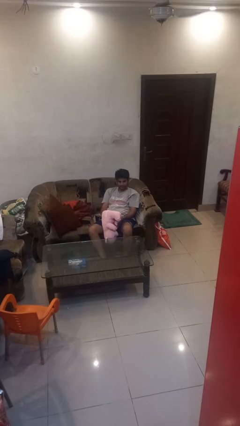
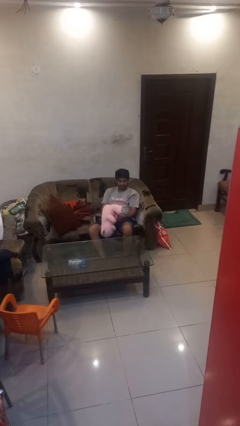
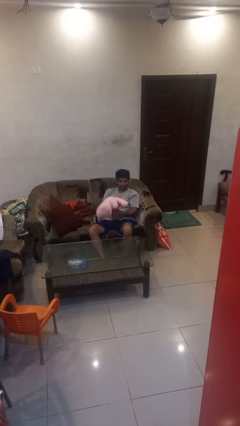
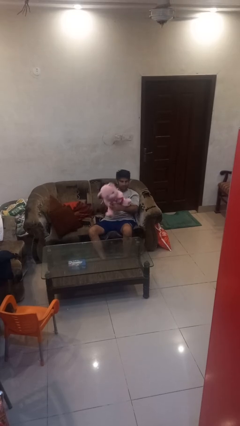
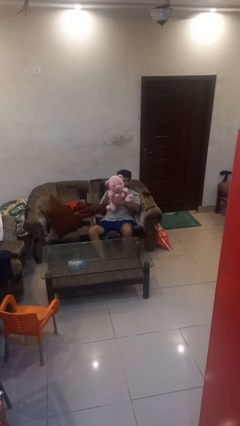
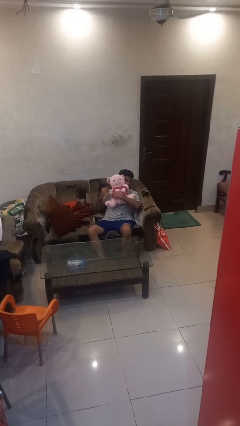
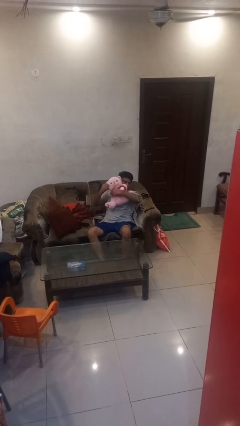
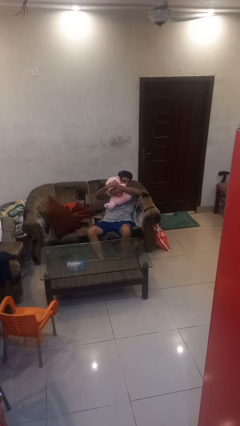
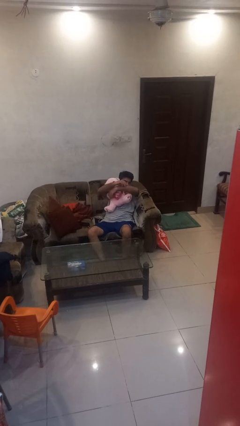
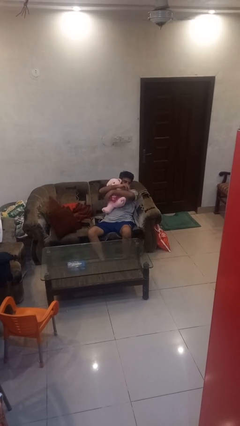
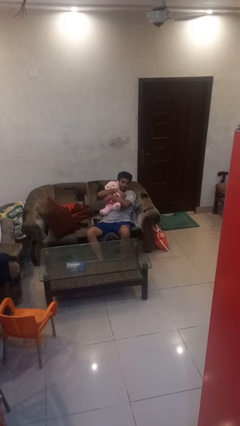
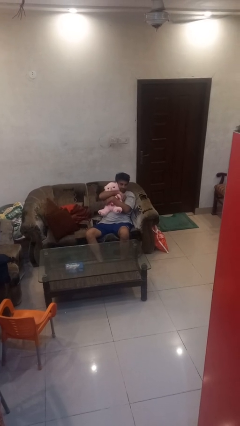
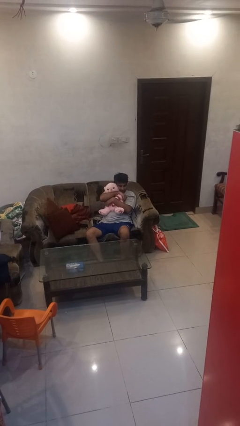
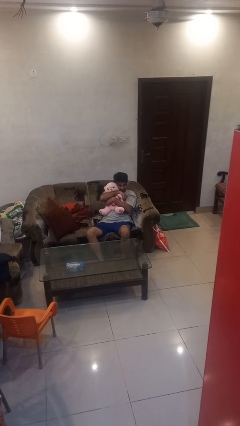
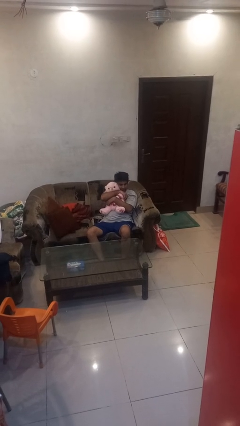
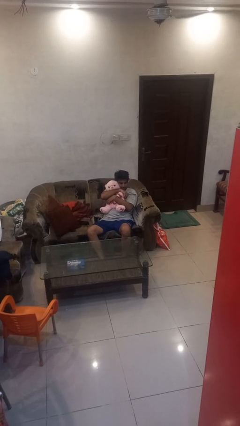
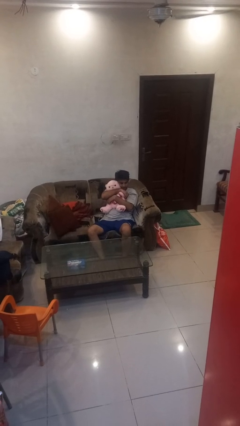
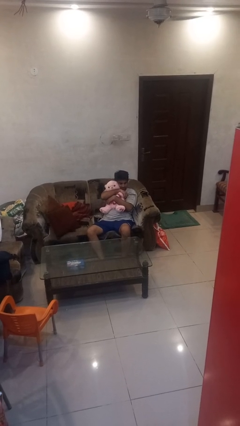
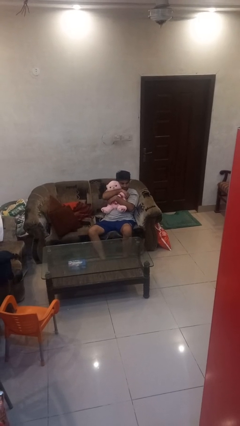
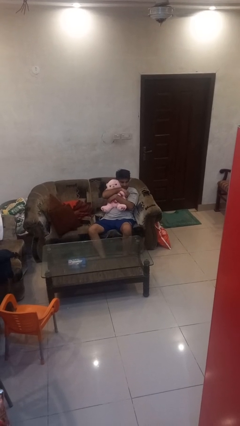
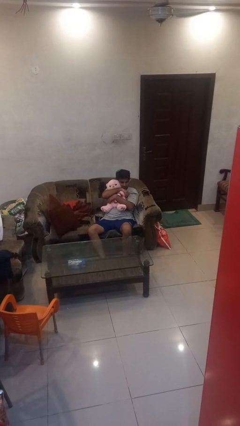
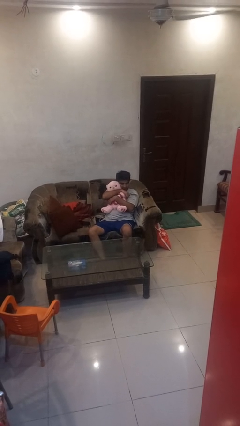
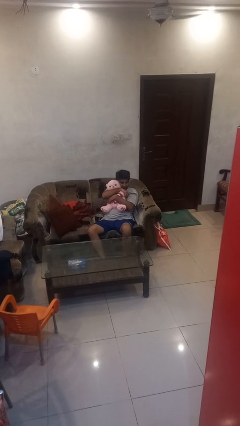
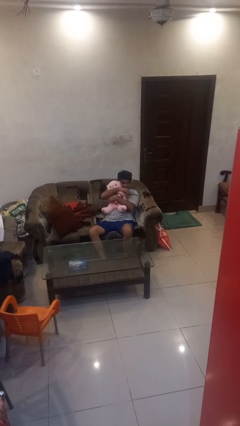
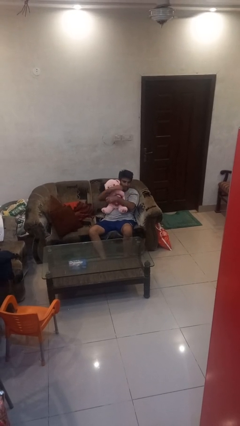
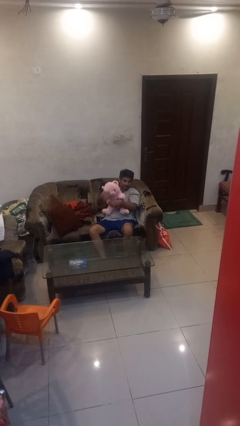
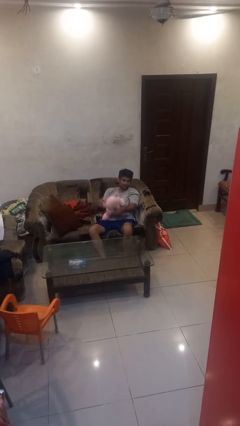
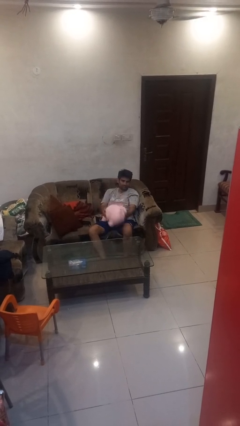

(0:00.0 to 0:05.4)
person hugs stuffed animal

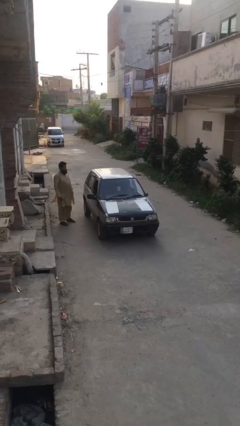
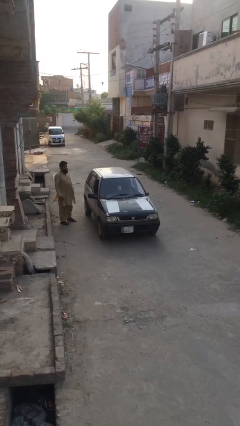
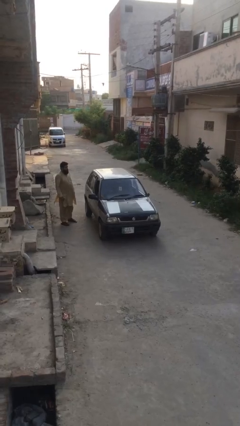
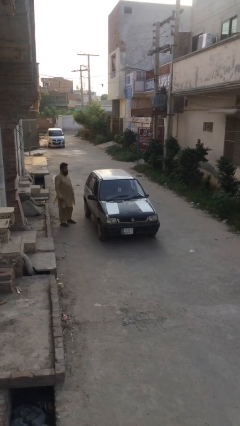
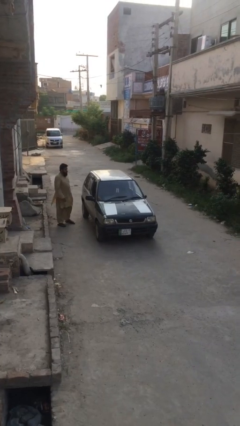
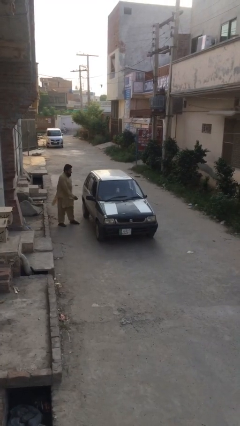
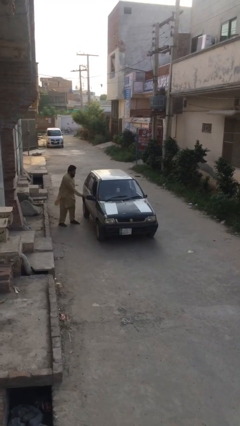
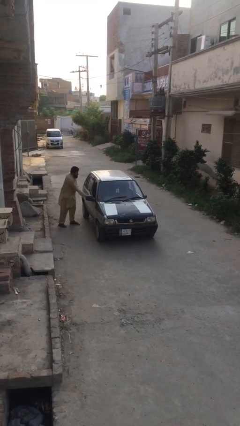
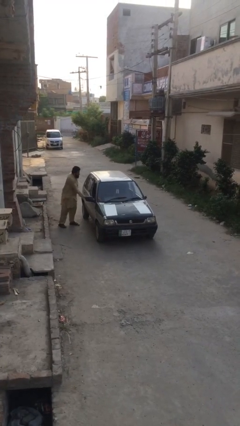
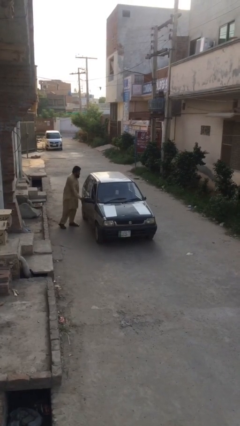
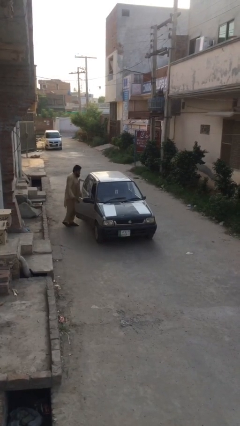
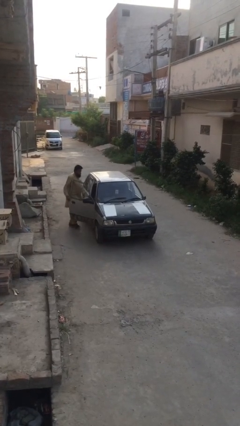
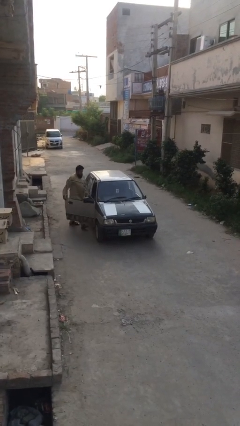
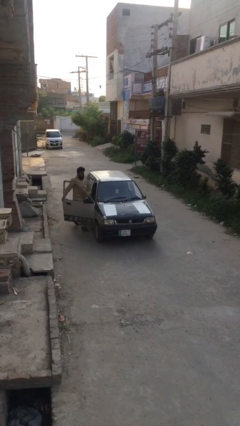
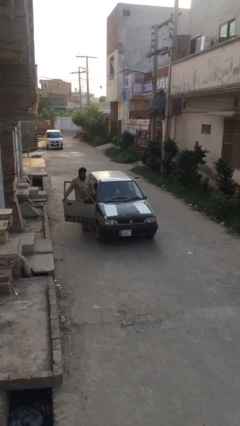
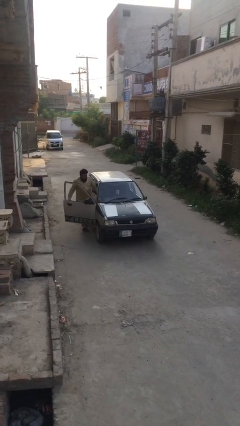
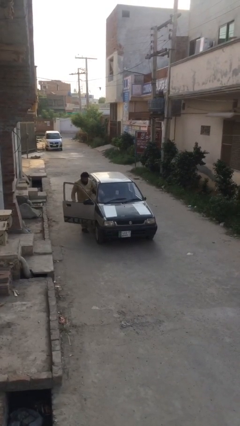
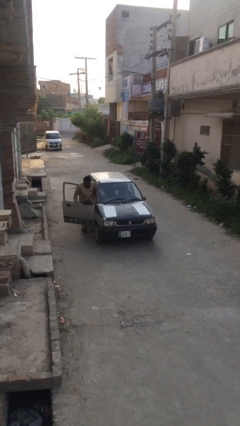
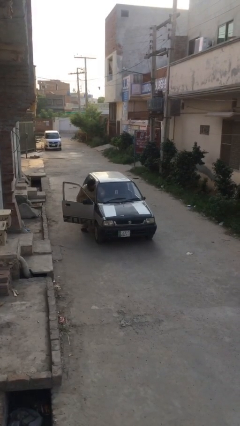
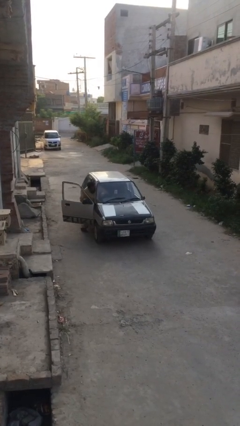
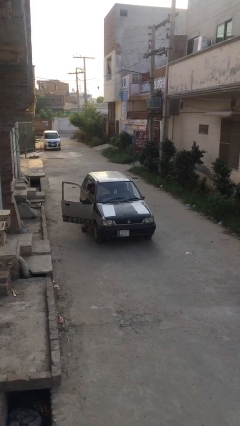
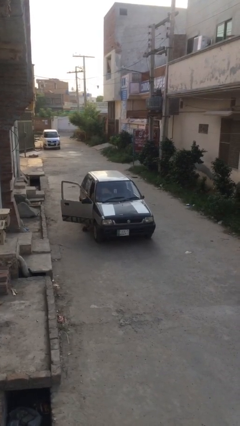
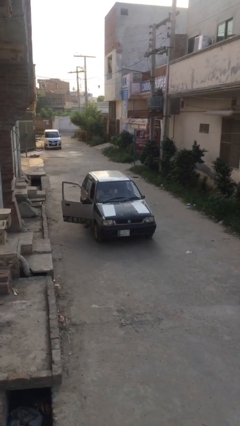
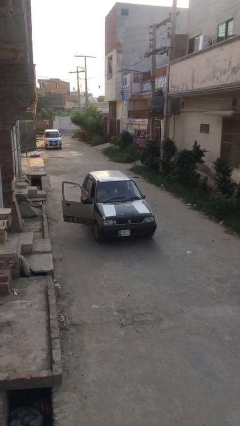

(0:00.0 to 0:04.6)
car picks up person

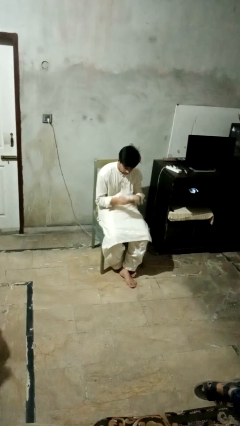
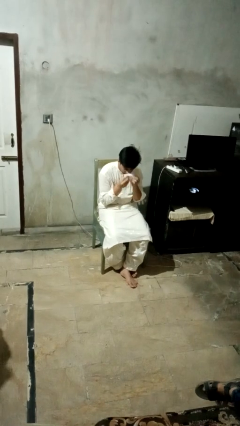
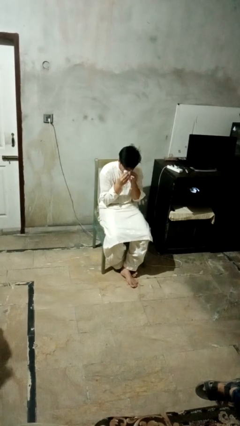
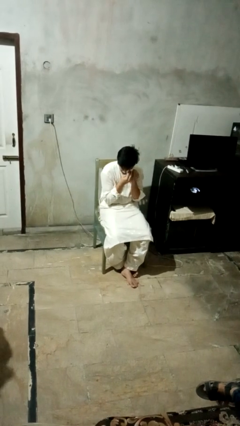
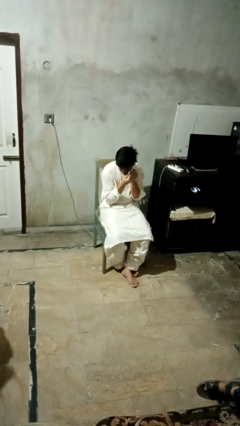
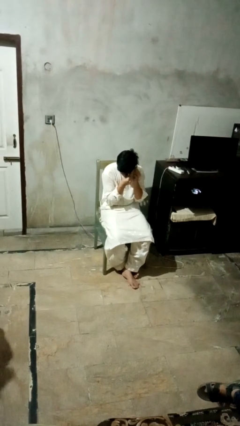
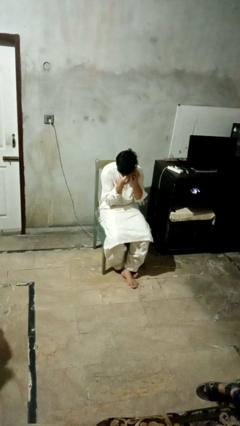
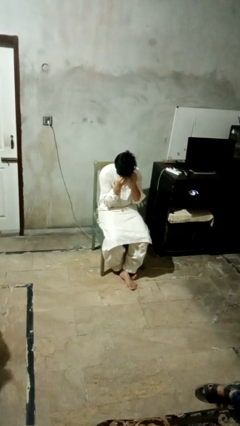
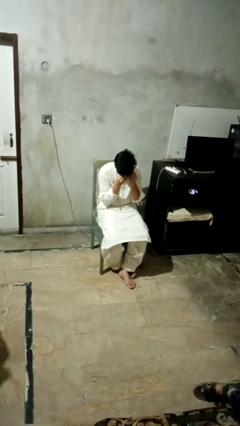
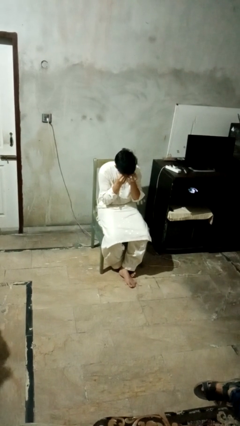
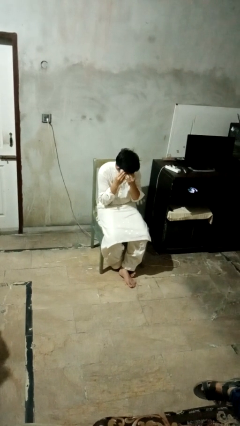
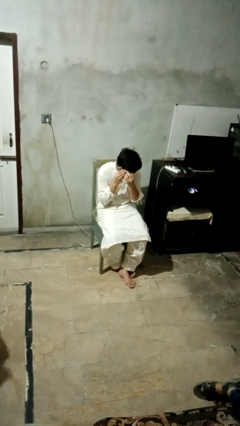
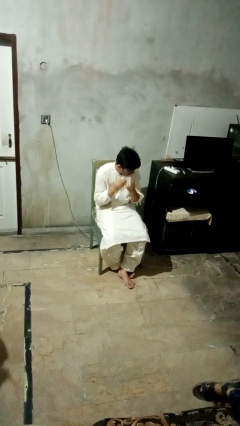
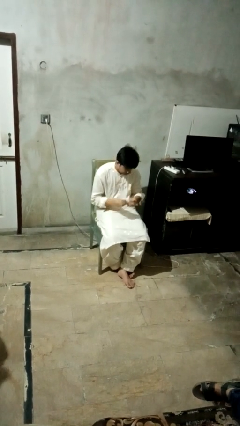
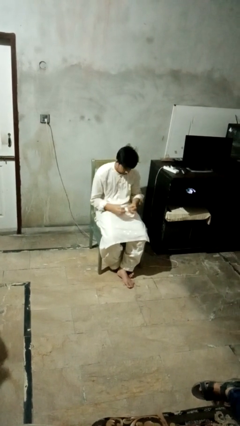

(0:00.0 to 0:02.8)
person wipes mouth with napkin

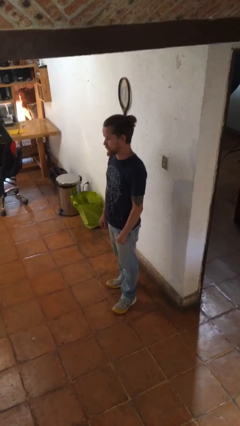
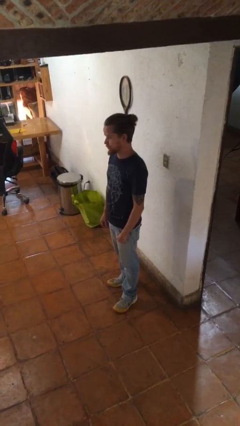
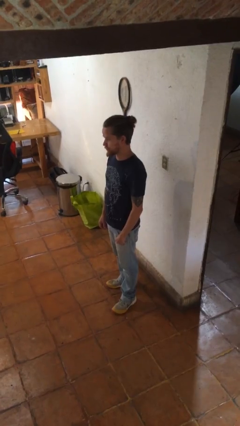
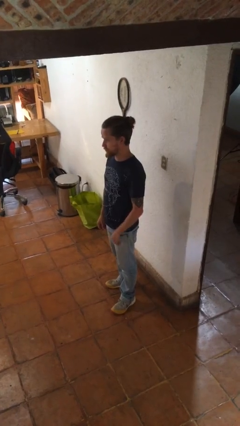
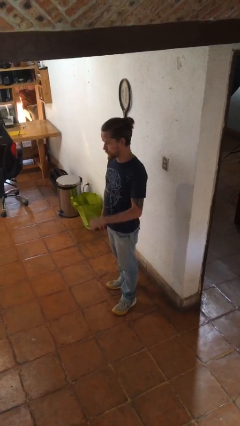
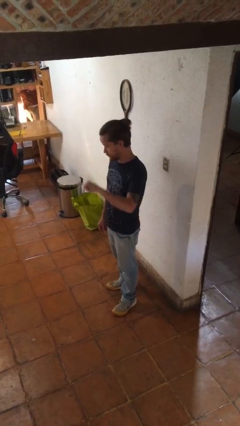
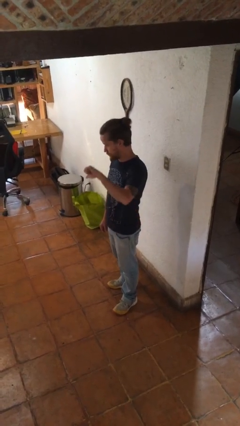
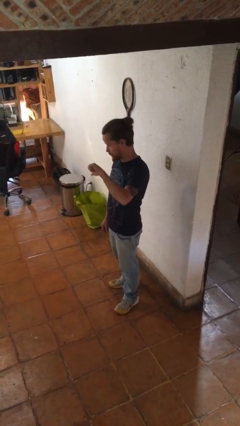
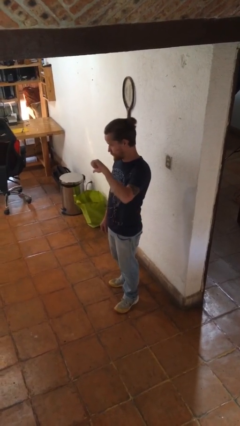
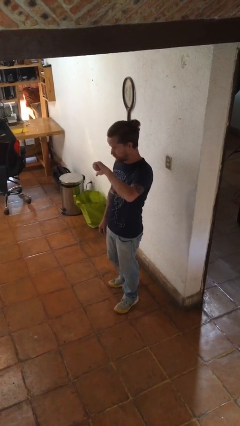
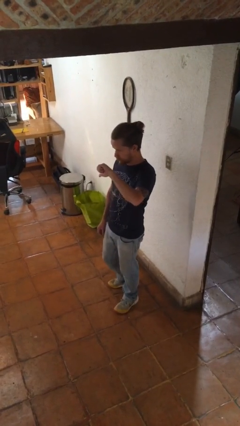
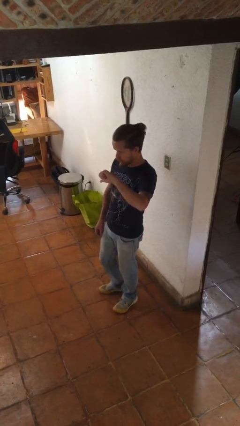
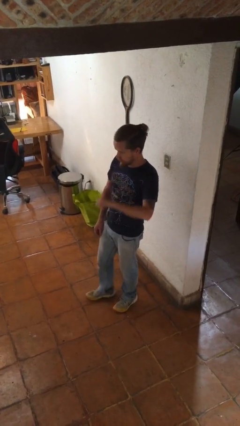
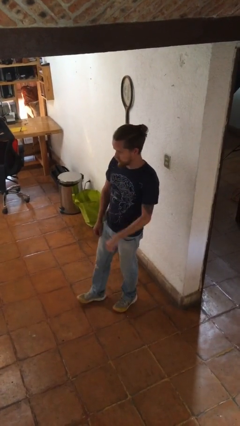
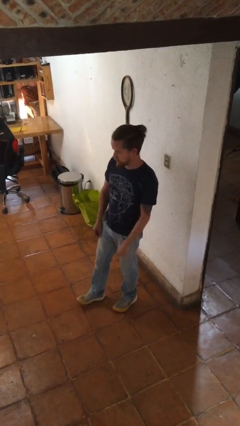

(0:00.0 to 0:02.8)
person gestures thumbs down

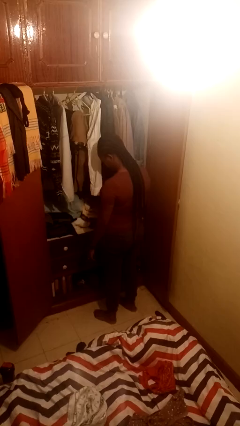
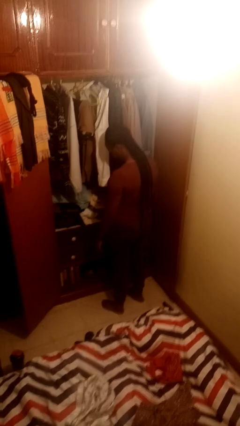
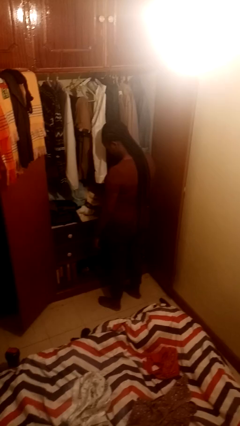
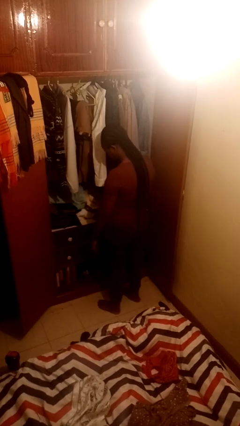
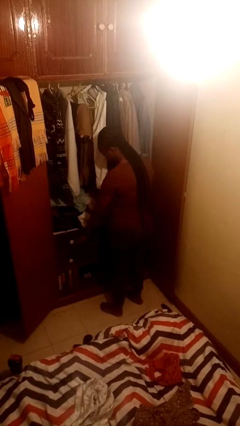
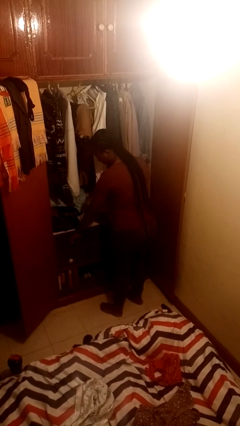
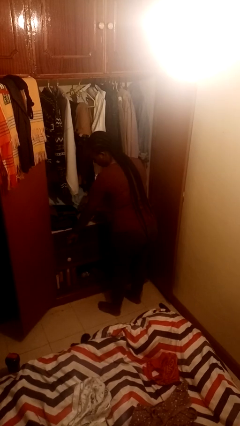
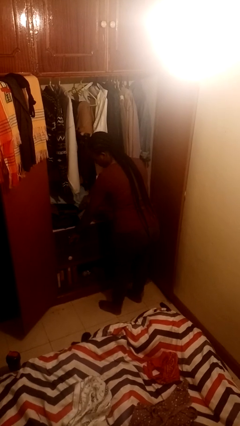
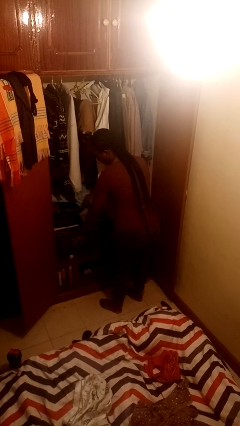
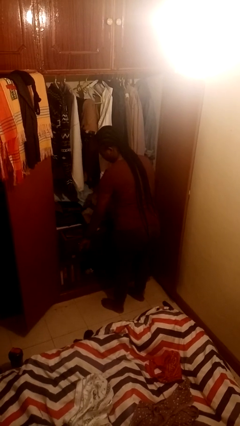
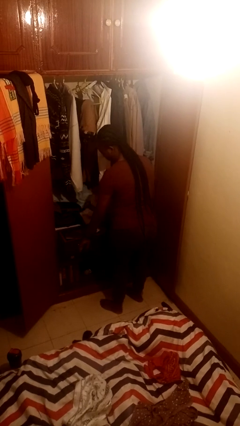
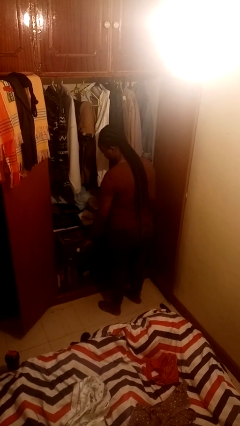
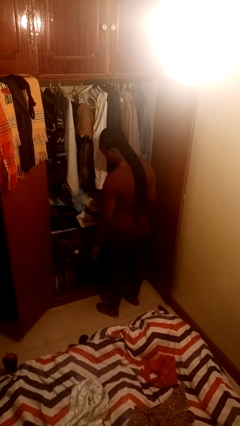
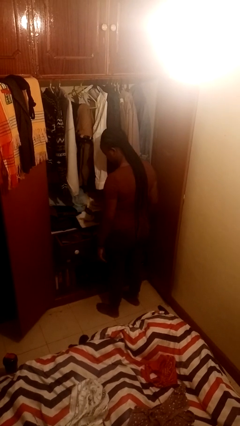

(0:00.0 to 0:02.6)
person opens dresser drawer
